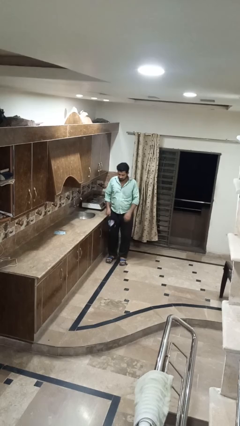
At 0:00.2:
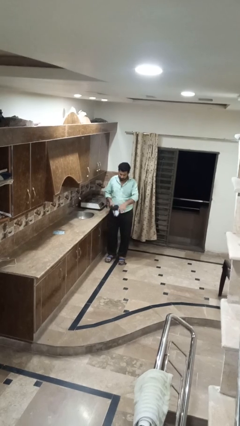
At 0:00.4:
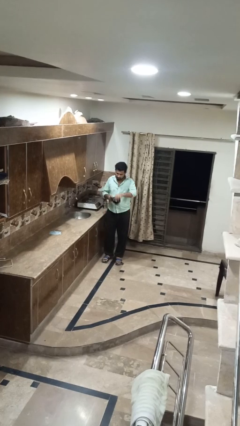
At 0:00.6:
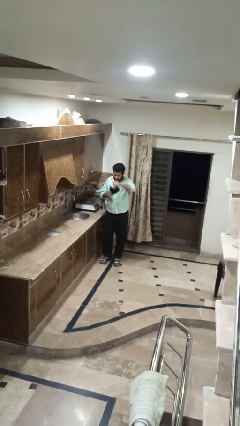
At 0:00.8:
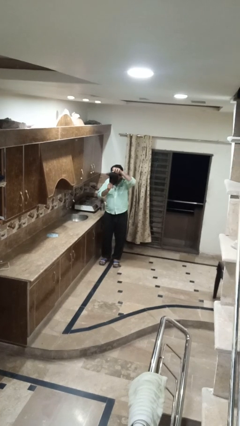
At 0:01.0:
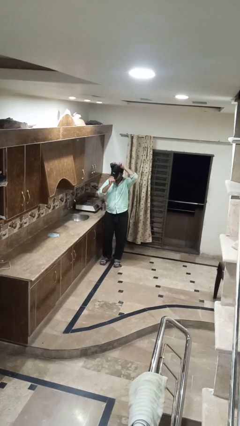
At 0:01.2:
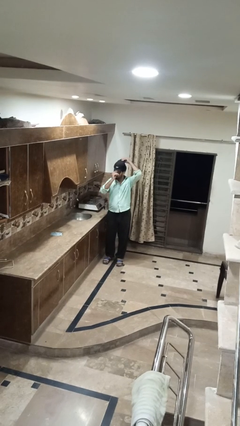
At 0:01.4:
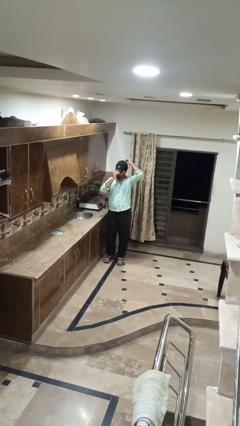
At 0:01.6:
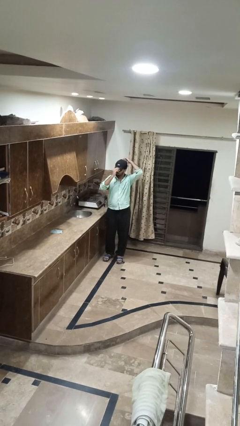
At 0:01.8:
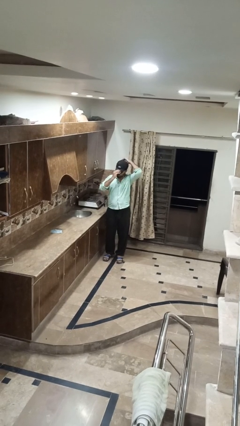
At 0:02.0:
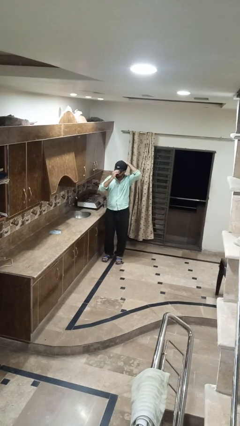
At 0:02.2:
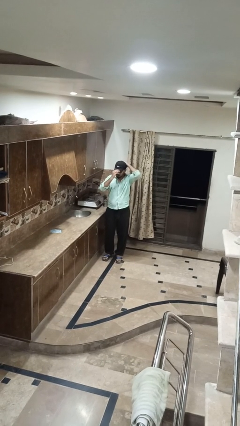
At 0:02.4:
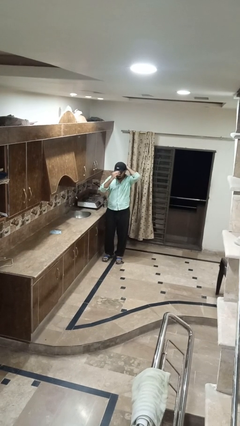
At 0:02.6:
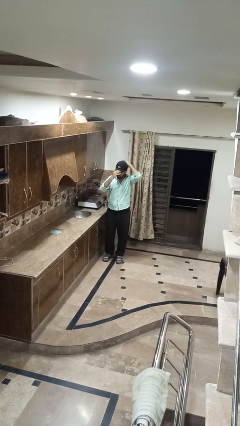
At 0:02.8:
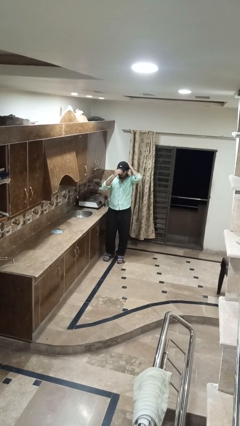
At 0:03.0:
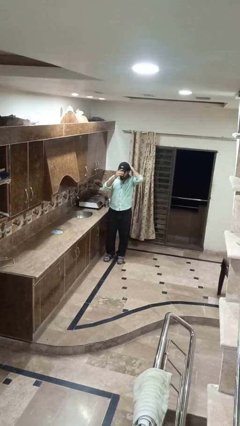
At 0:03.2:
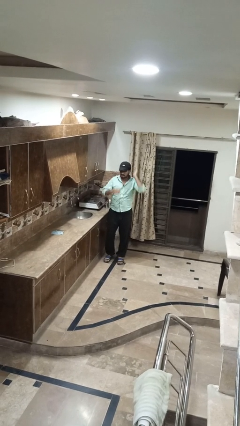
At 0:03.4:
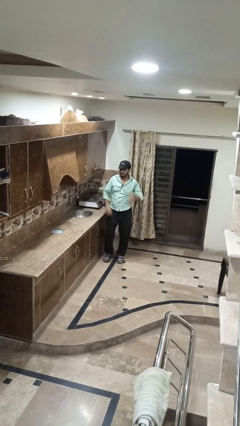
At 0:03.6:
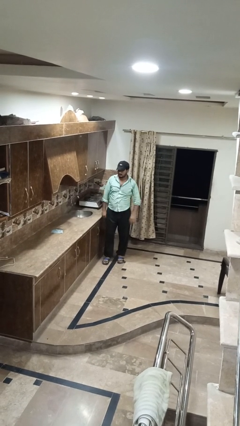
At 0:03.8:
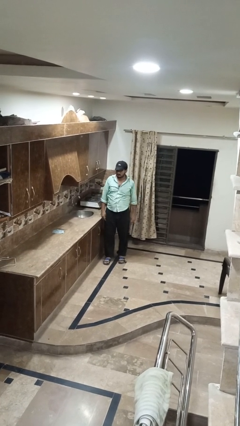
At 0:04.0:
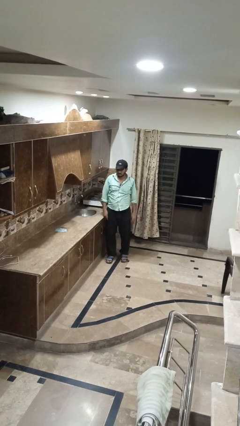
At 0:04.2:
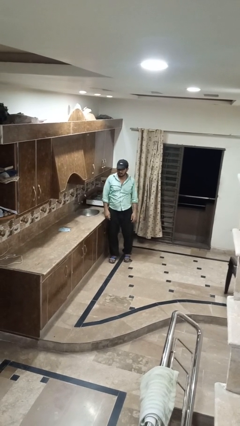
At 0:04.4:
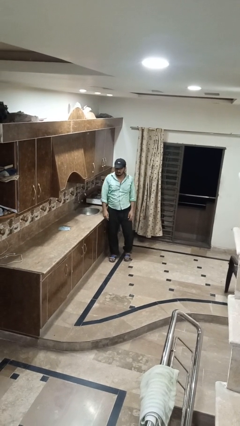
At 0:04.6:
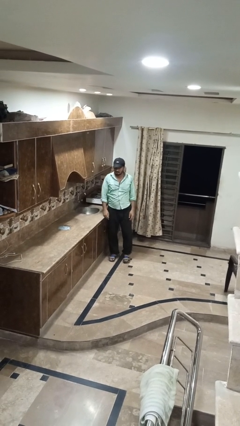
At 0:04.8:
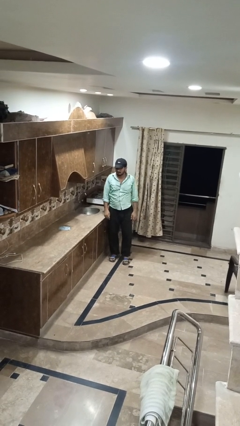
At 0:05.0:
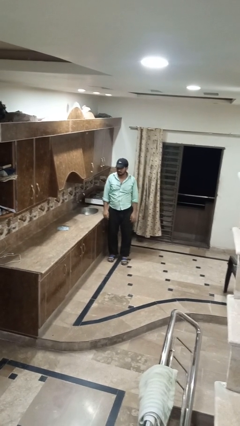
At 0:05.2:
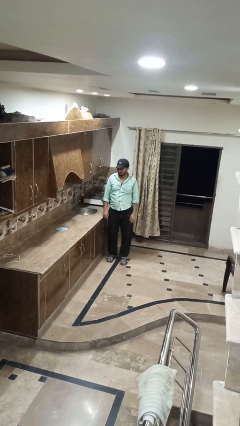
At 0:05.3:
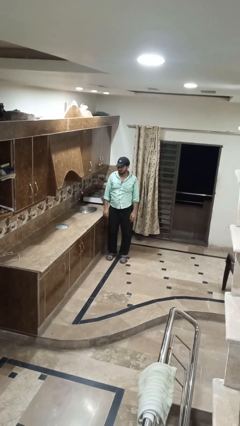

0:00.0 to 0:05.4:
person puts on hat

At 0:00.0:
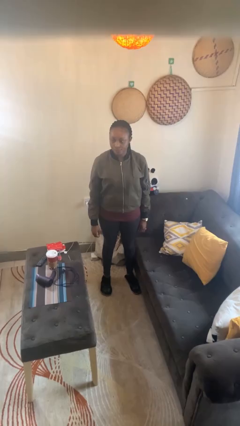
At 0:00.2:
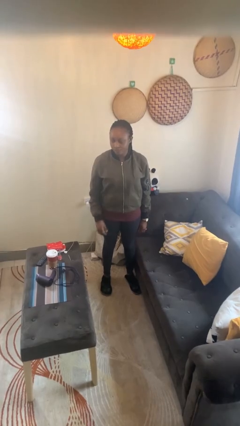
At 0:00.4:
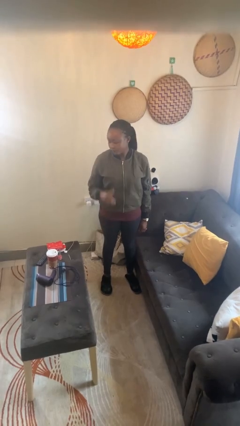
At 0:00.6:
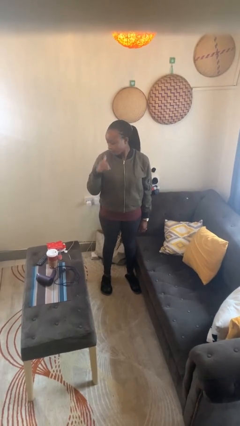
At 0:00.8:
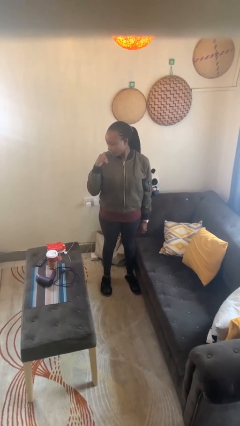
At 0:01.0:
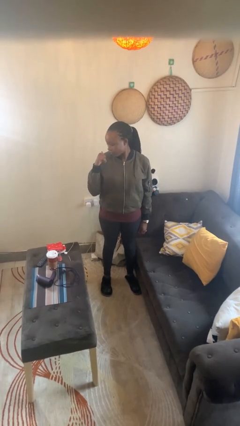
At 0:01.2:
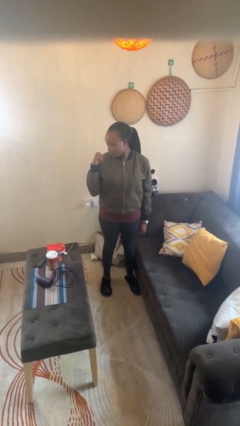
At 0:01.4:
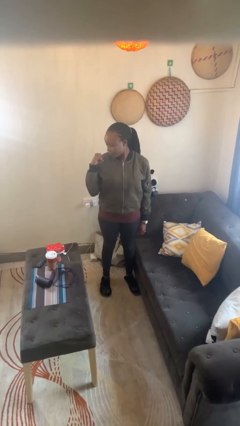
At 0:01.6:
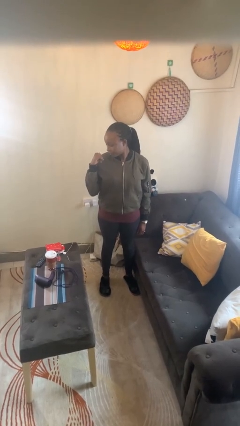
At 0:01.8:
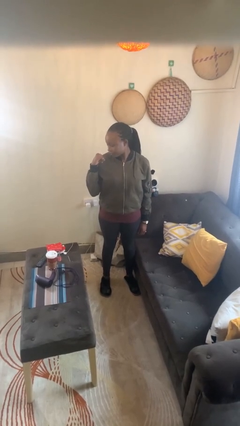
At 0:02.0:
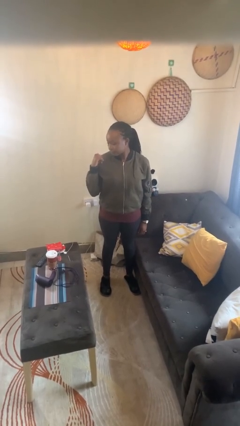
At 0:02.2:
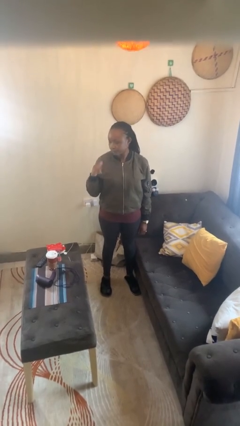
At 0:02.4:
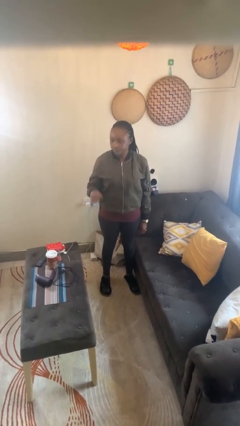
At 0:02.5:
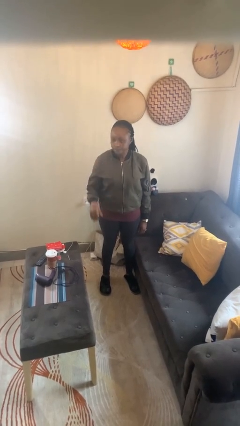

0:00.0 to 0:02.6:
person gestures behind me

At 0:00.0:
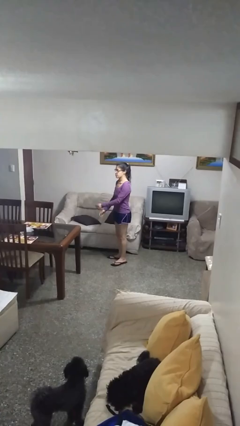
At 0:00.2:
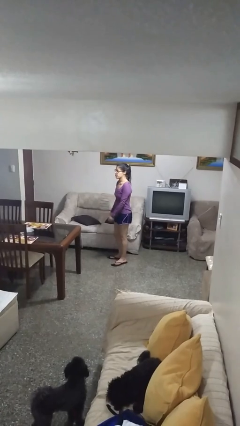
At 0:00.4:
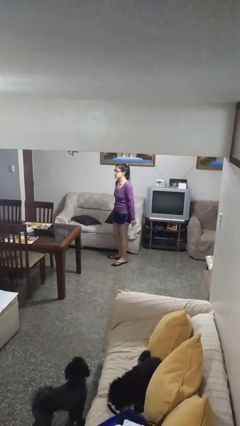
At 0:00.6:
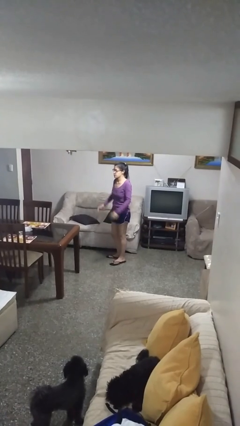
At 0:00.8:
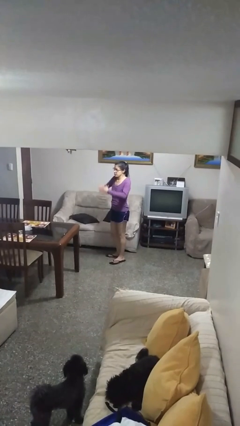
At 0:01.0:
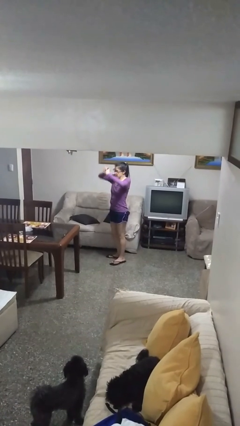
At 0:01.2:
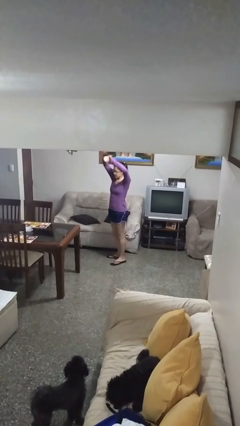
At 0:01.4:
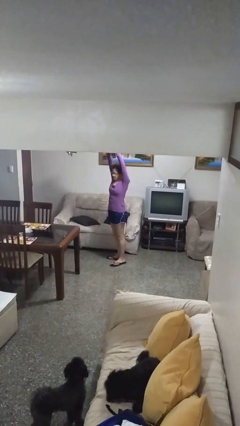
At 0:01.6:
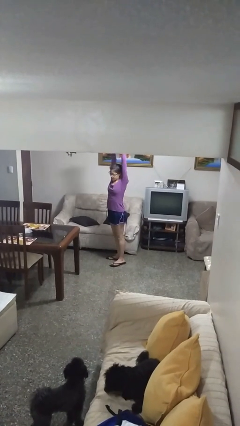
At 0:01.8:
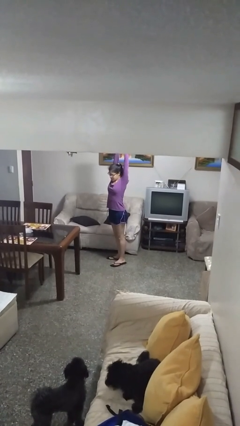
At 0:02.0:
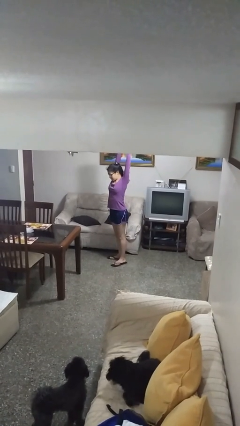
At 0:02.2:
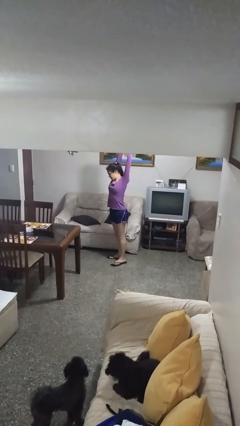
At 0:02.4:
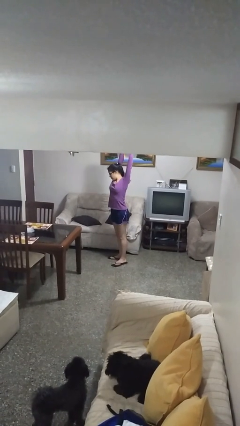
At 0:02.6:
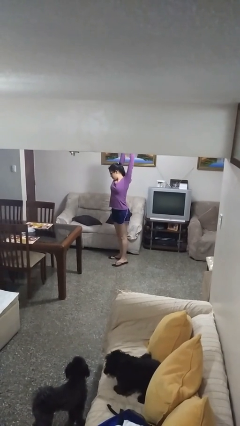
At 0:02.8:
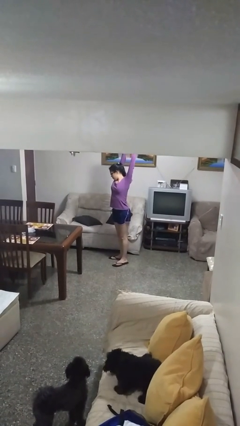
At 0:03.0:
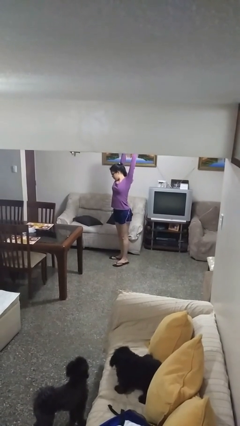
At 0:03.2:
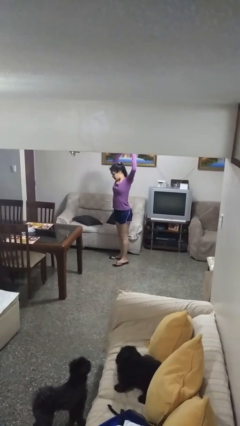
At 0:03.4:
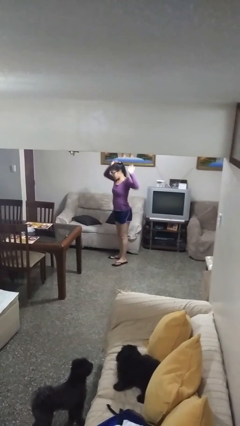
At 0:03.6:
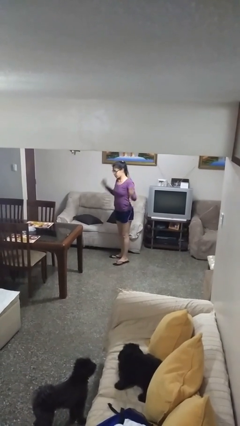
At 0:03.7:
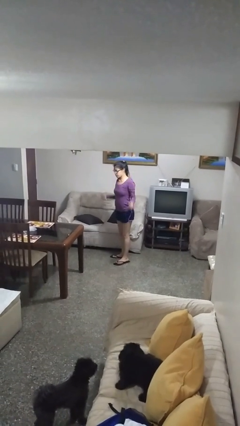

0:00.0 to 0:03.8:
person stretches arms over head

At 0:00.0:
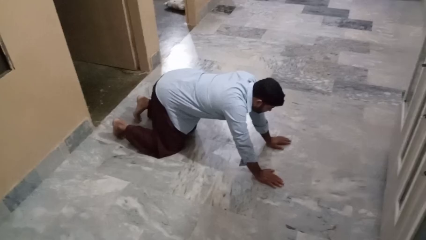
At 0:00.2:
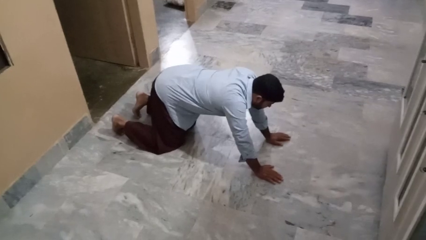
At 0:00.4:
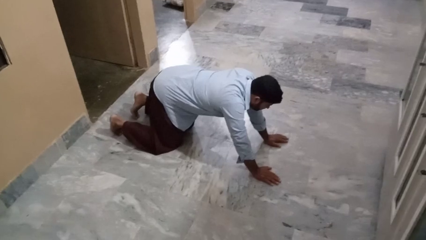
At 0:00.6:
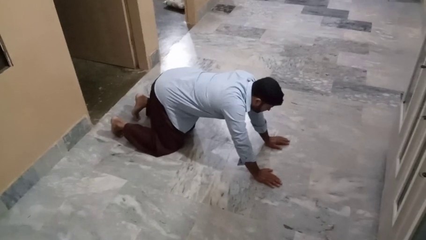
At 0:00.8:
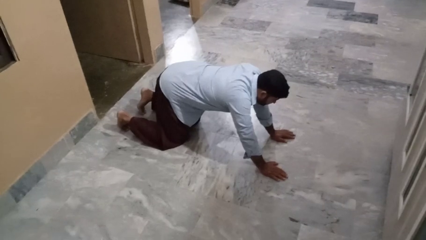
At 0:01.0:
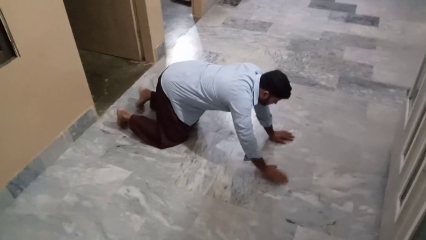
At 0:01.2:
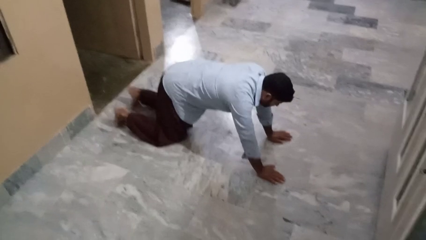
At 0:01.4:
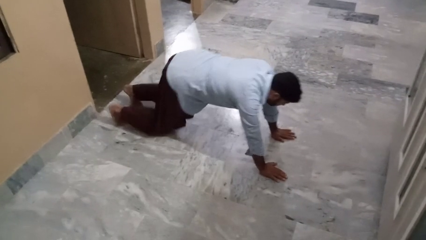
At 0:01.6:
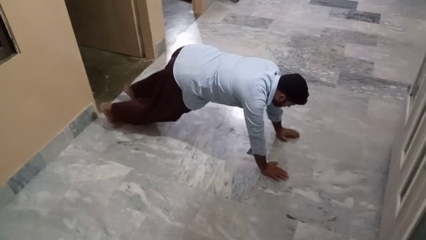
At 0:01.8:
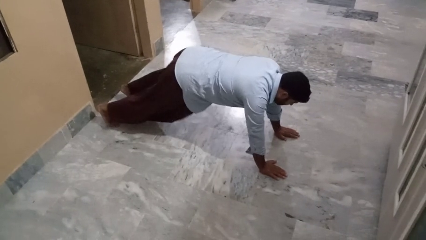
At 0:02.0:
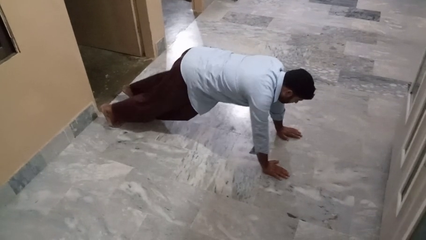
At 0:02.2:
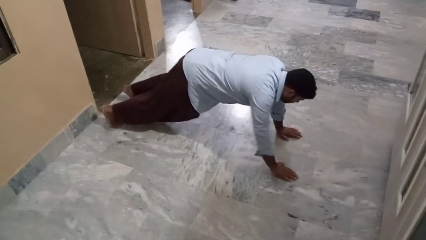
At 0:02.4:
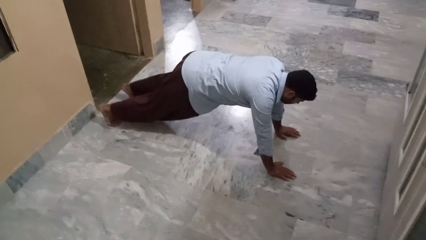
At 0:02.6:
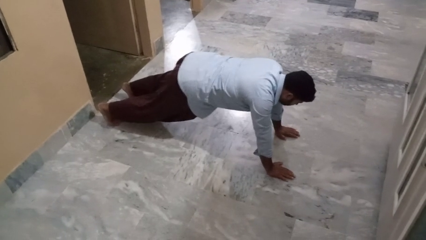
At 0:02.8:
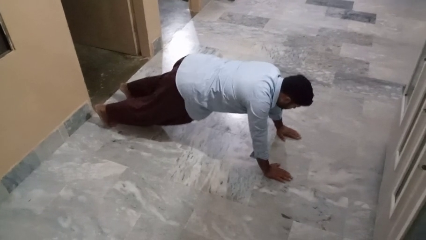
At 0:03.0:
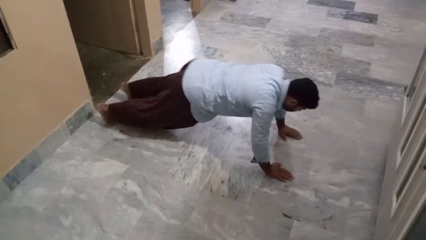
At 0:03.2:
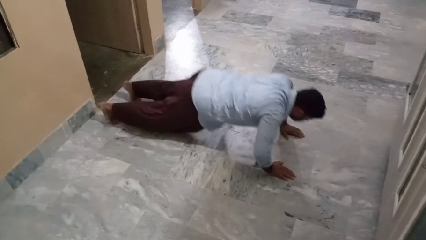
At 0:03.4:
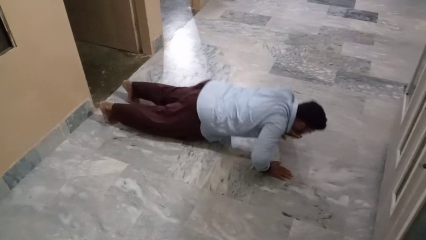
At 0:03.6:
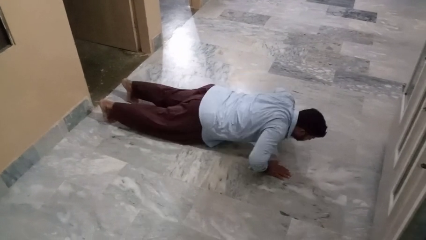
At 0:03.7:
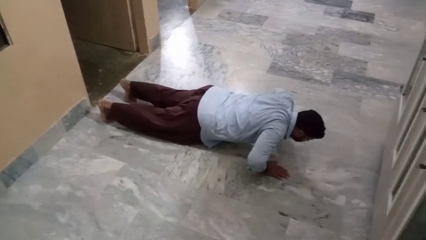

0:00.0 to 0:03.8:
person exercises with pushup

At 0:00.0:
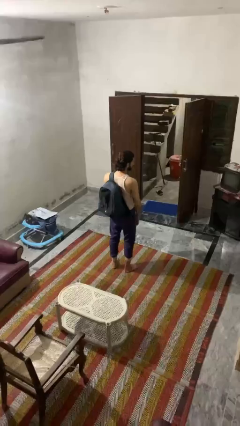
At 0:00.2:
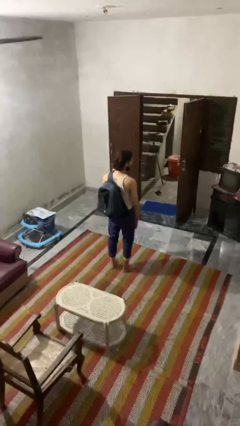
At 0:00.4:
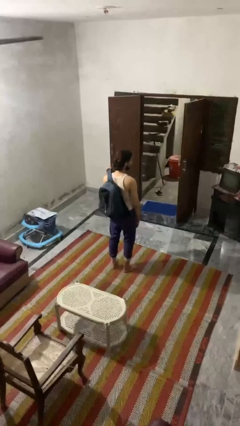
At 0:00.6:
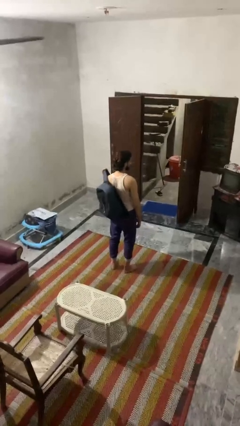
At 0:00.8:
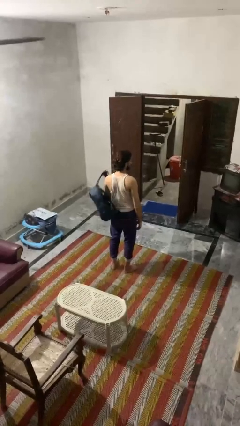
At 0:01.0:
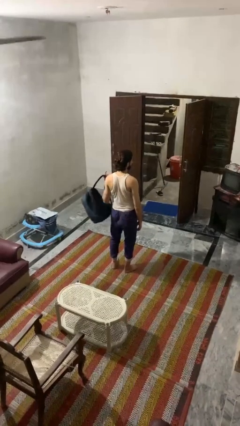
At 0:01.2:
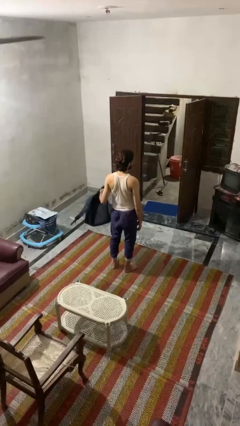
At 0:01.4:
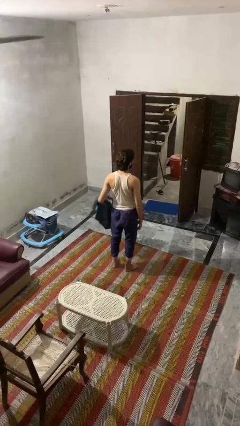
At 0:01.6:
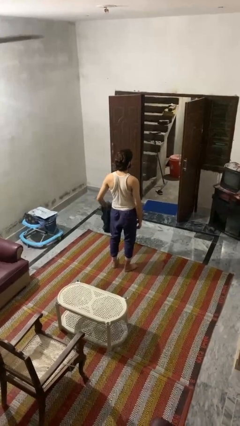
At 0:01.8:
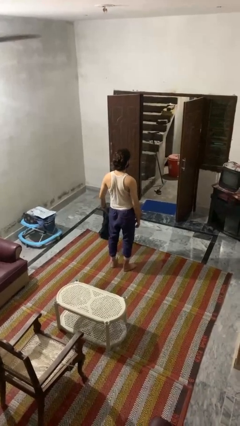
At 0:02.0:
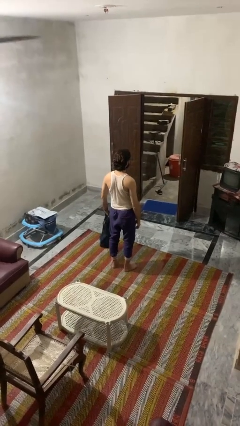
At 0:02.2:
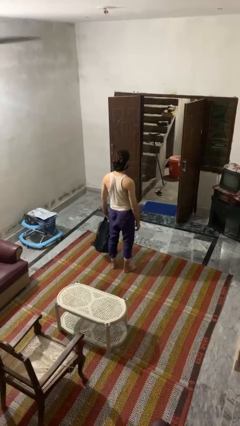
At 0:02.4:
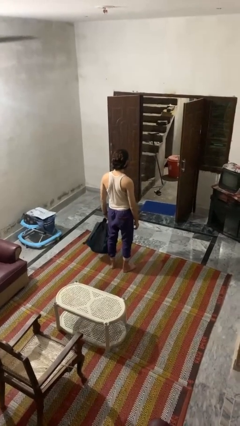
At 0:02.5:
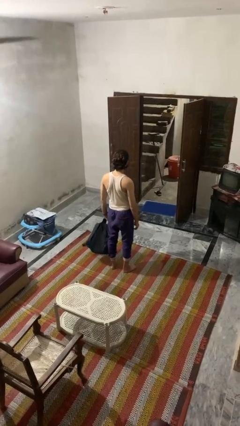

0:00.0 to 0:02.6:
person takes off backpack
